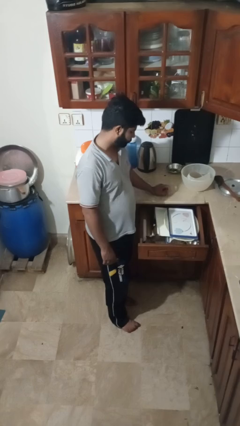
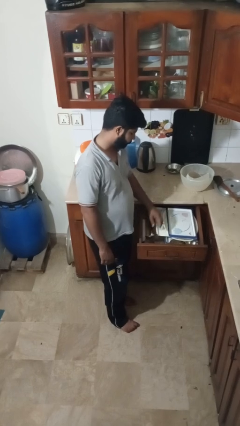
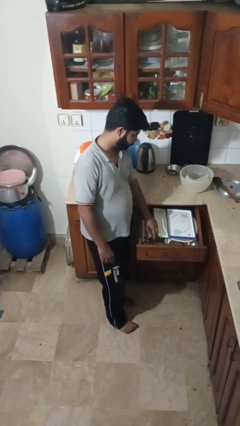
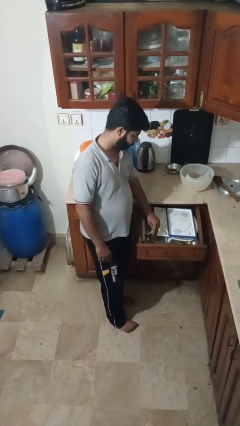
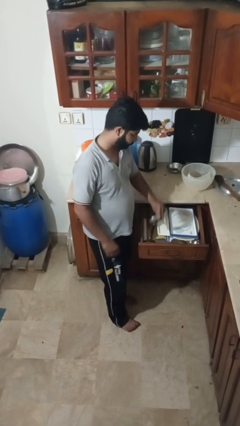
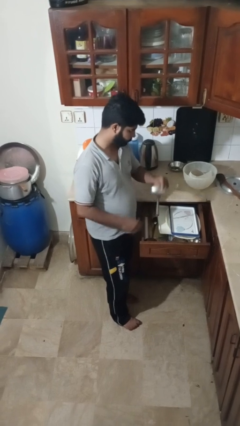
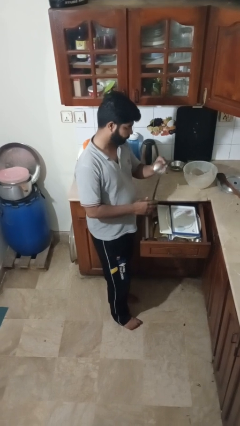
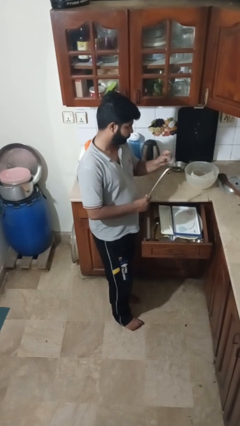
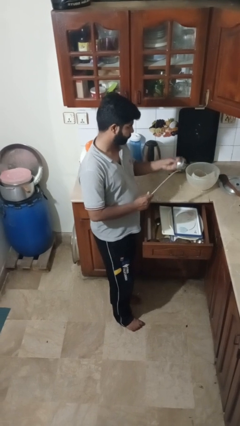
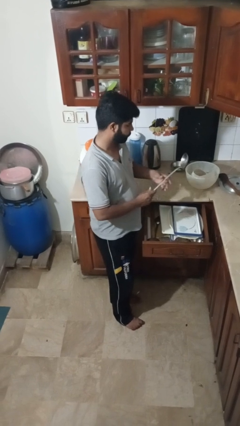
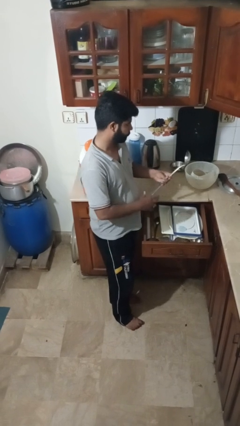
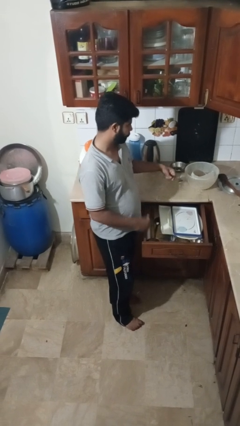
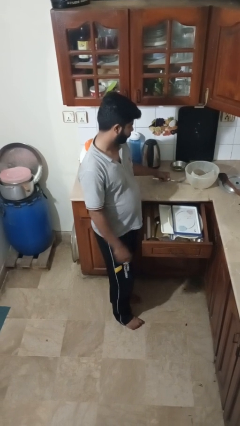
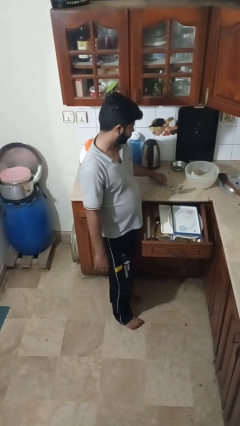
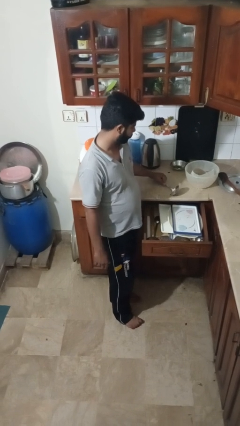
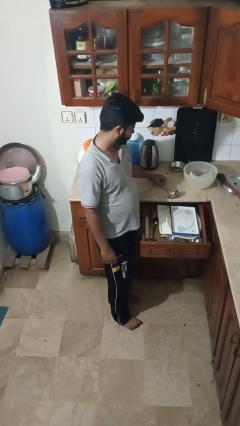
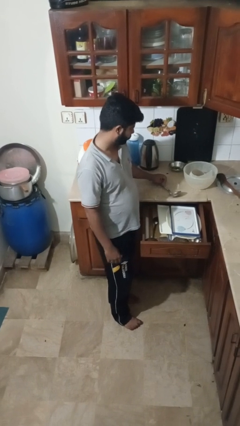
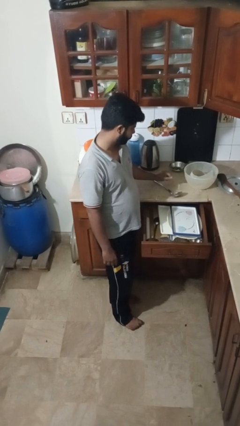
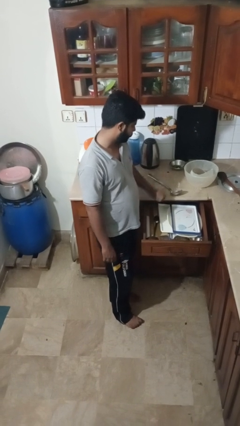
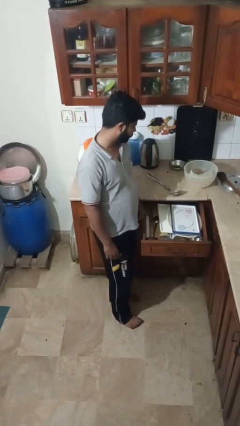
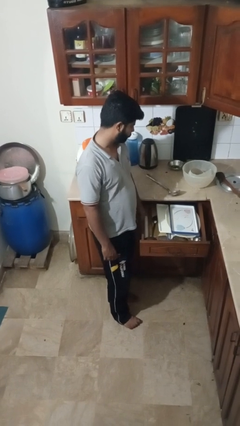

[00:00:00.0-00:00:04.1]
person takes object from kitchen drawer

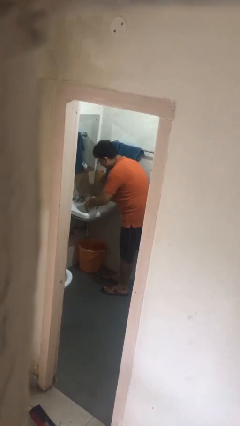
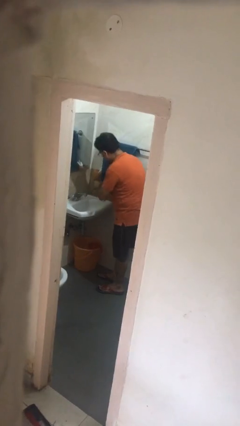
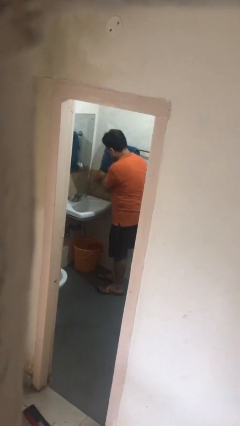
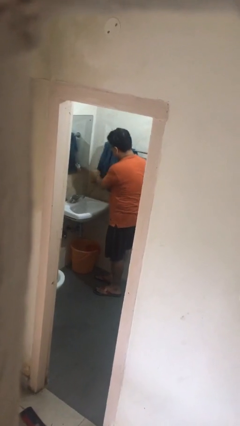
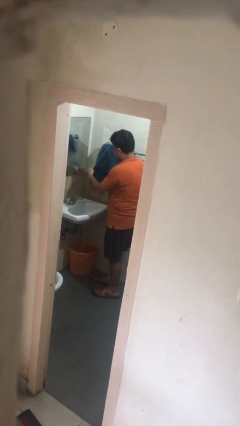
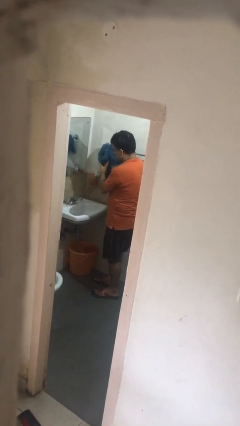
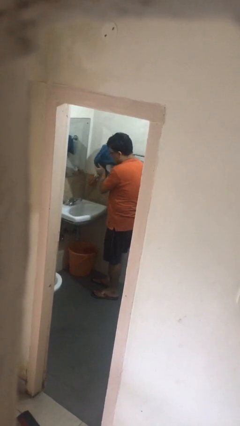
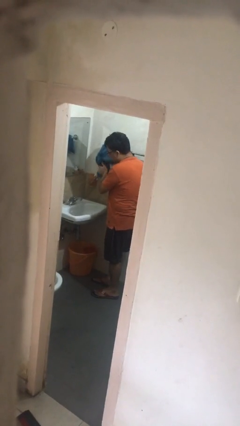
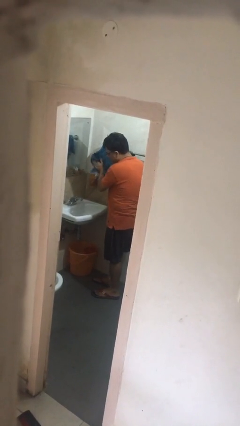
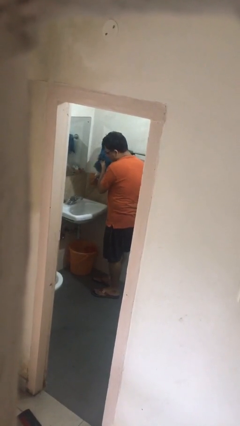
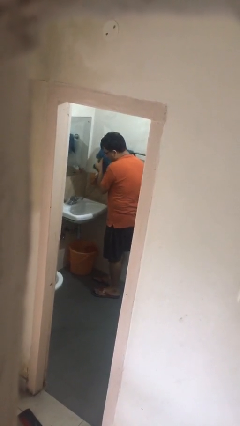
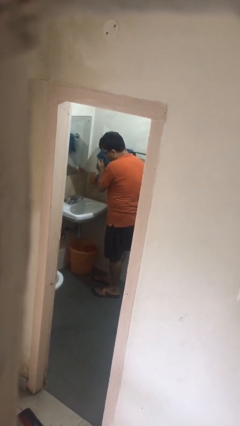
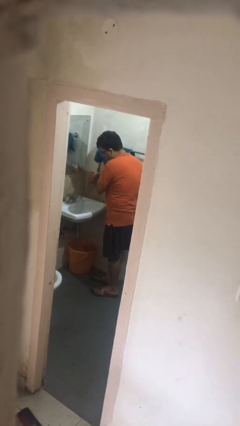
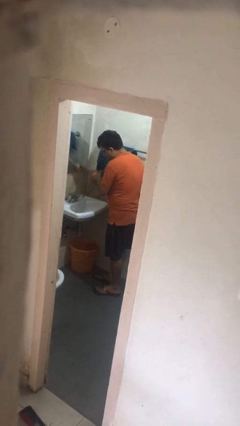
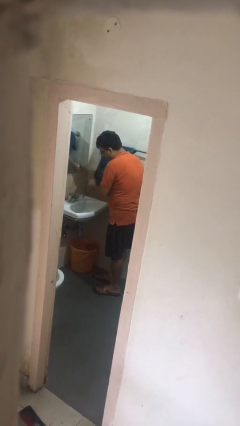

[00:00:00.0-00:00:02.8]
person dries hands with towel

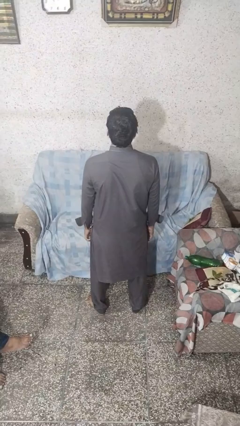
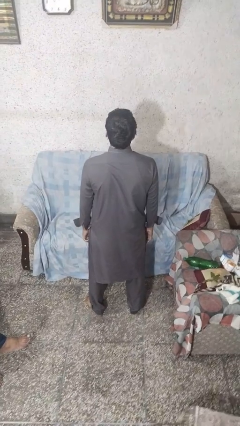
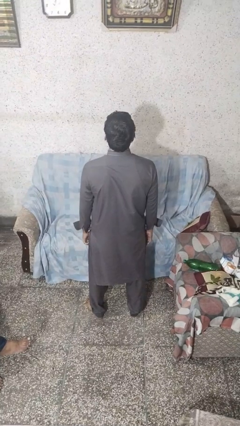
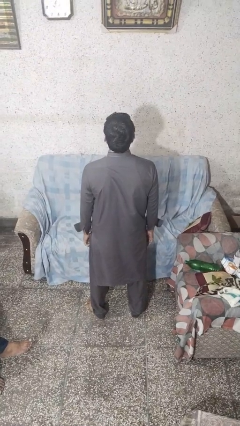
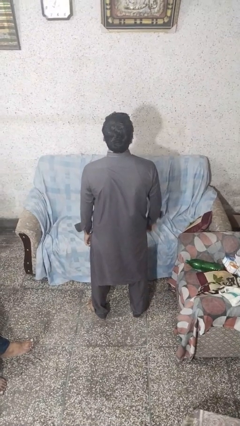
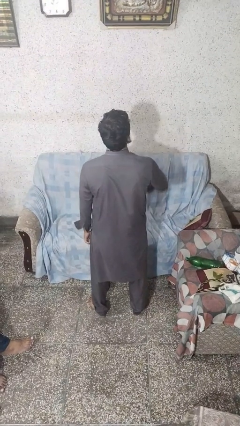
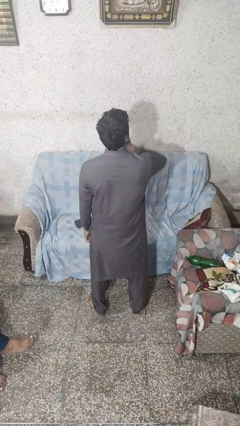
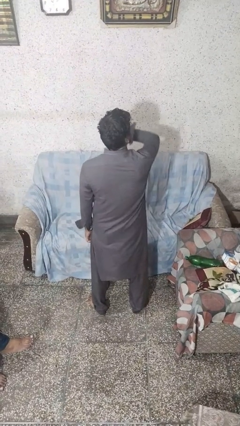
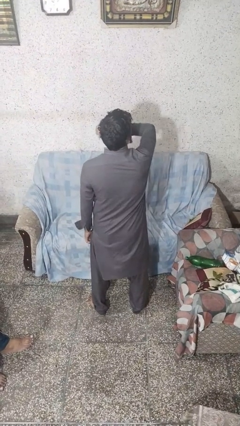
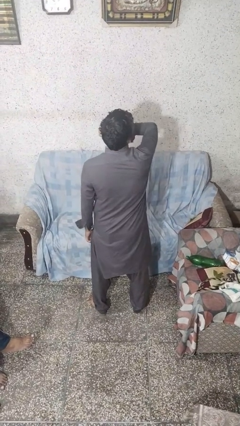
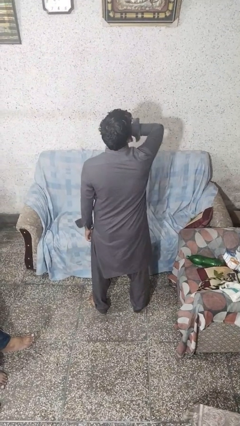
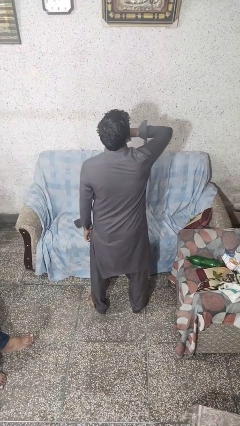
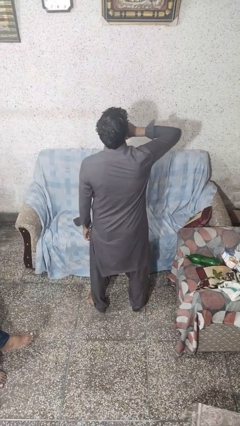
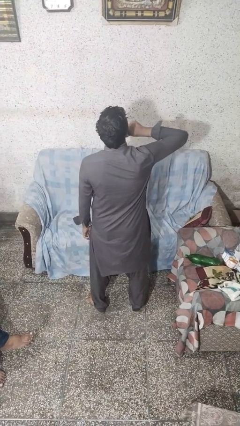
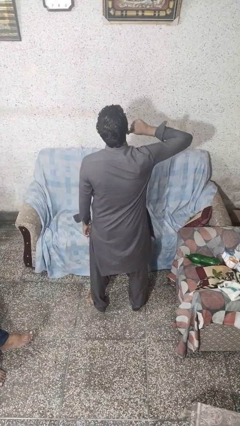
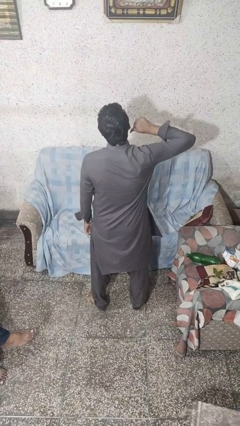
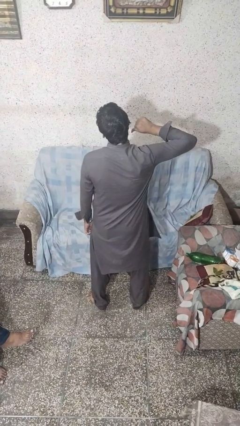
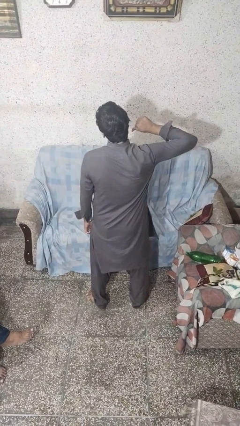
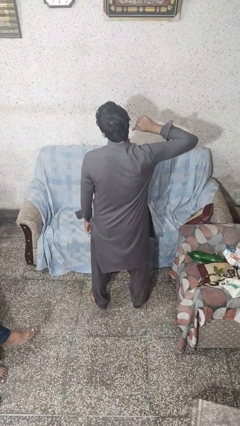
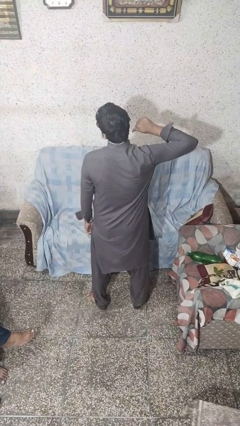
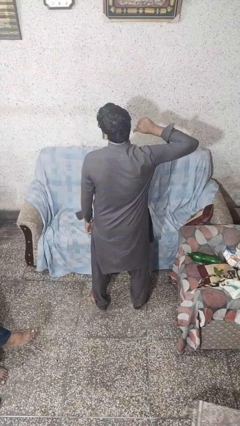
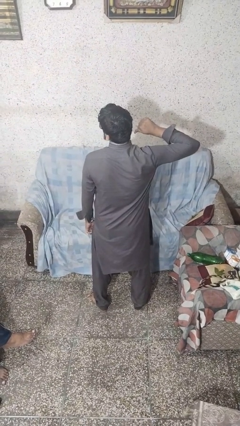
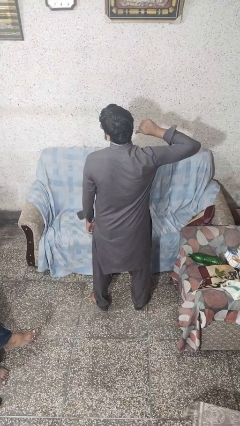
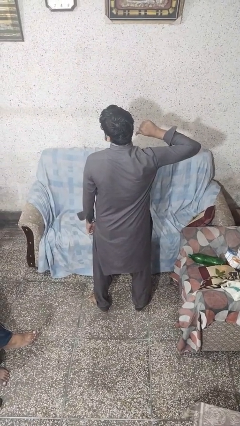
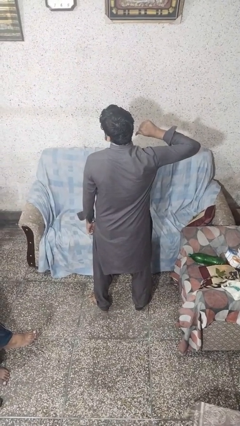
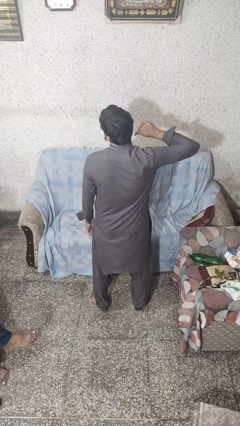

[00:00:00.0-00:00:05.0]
person gestures cut

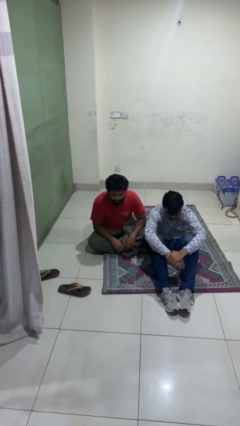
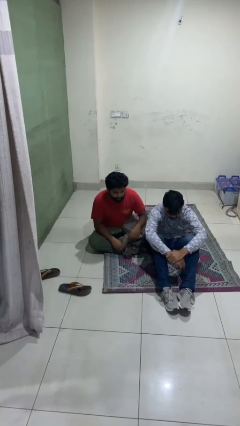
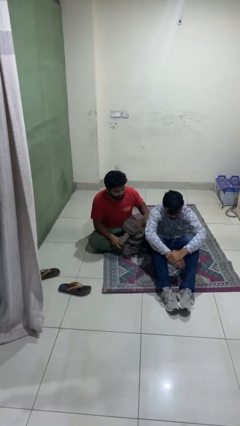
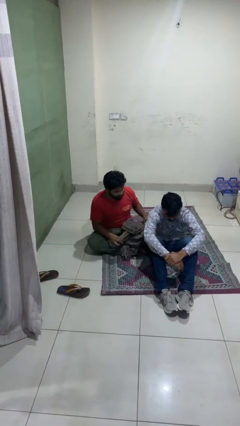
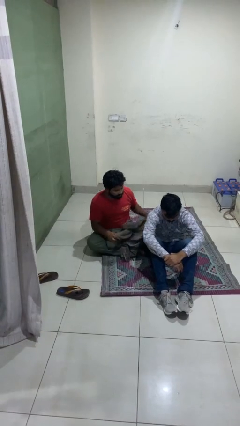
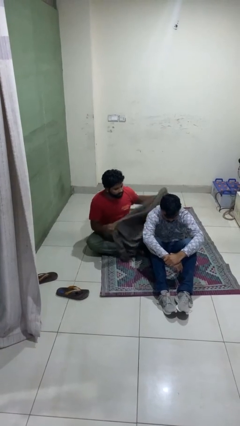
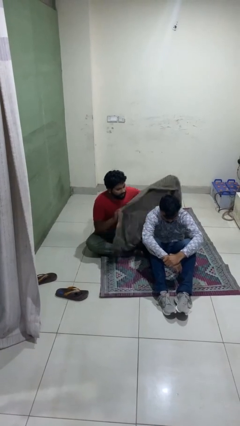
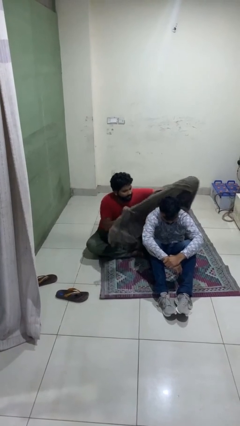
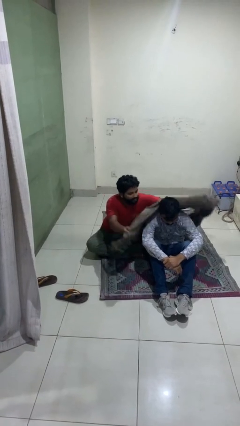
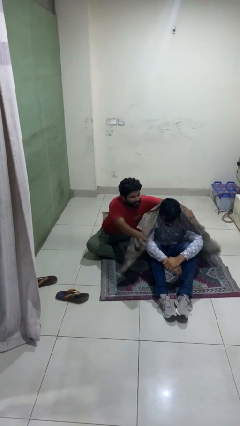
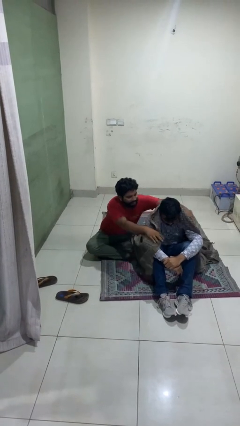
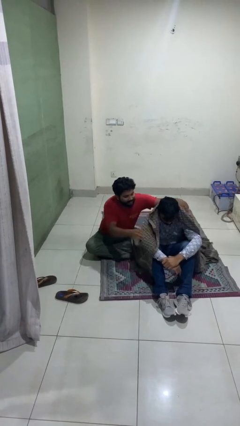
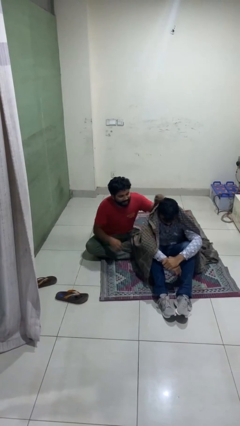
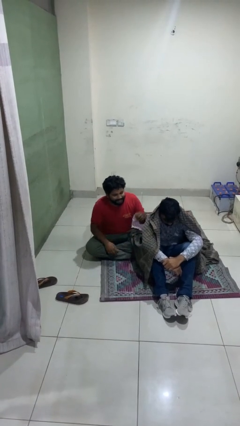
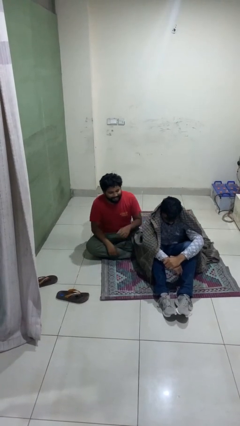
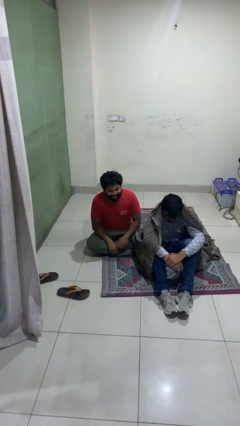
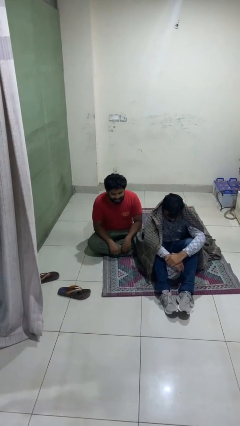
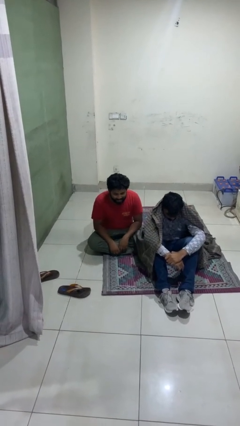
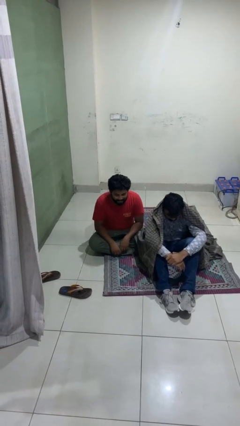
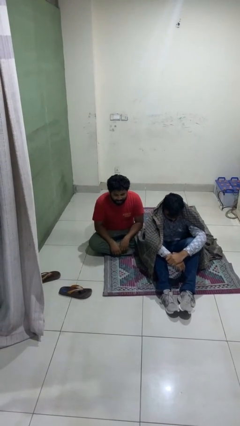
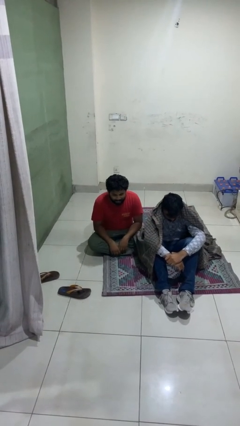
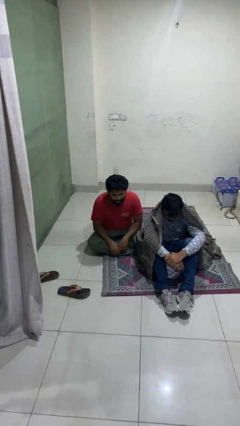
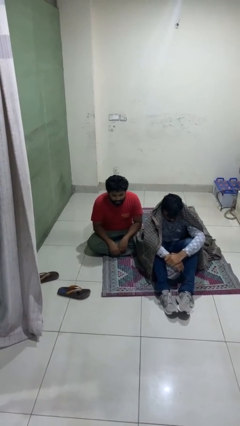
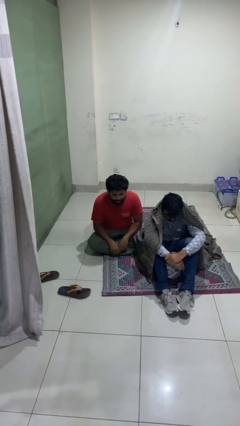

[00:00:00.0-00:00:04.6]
person covers friend with blanket

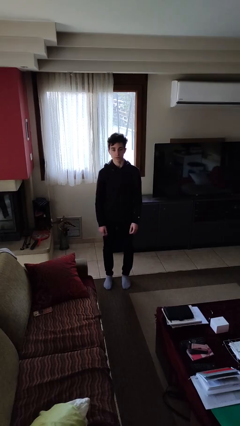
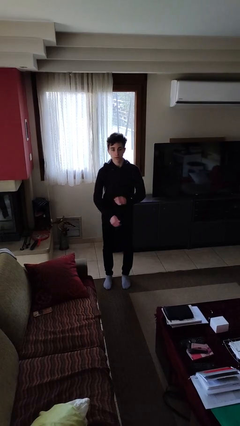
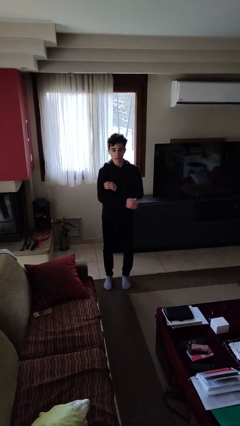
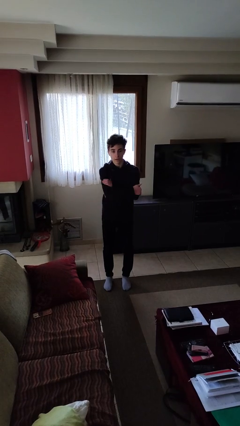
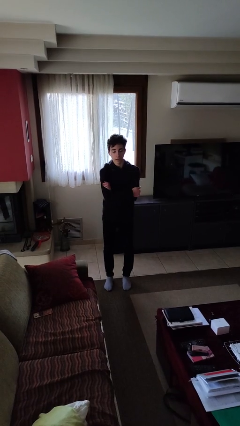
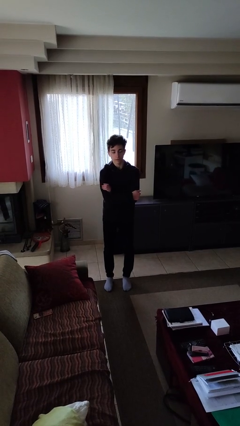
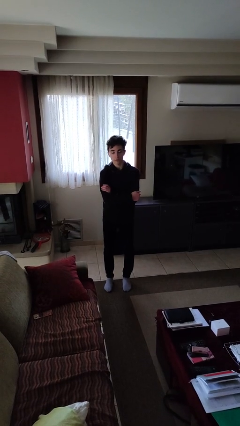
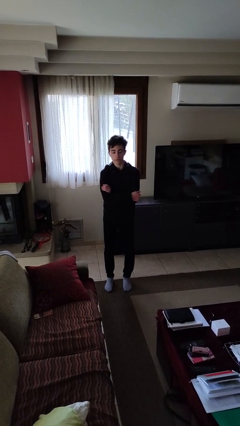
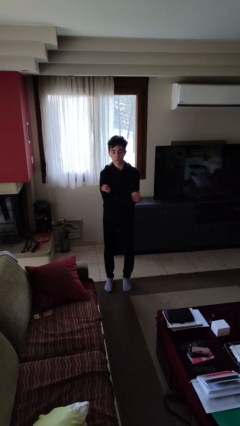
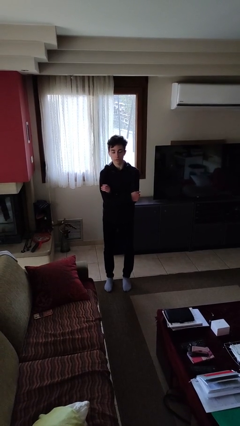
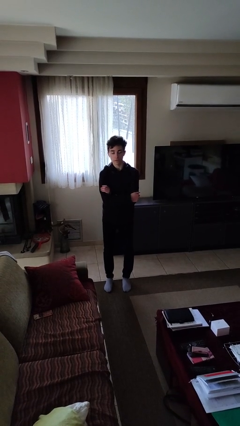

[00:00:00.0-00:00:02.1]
person crosses arms
